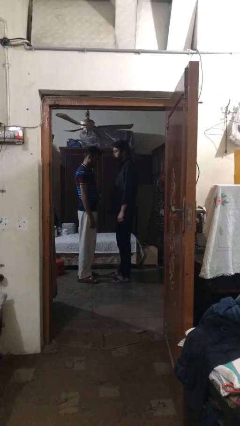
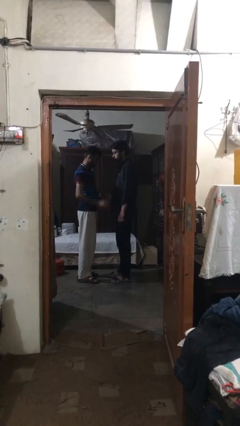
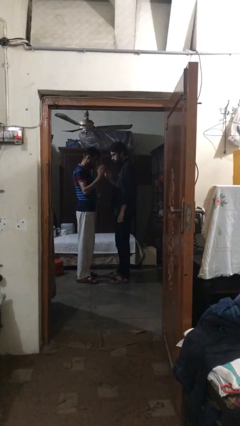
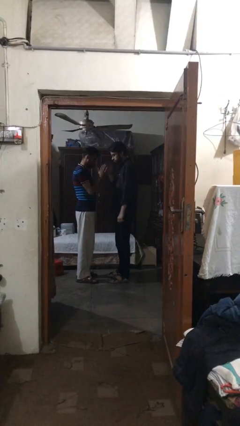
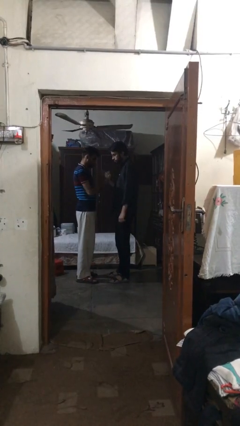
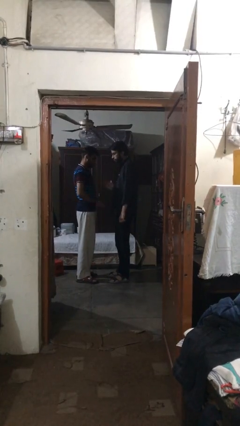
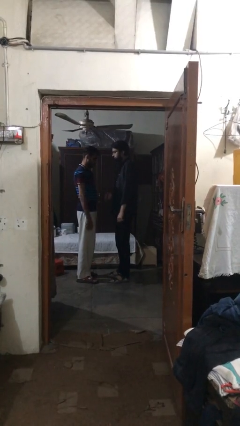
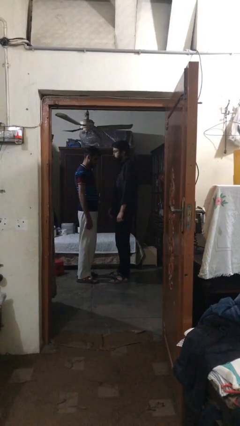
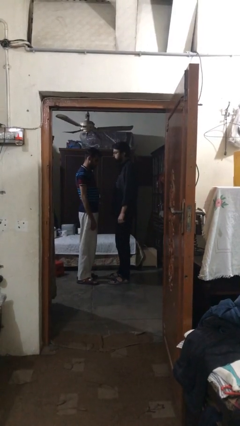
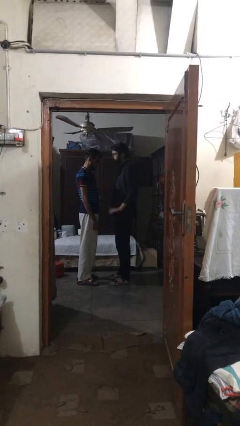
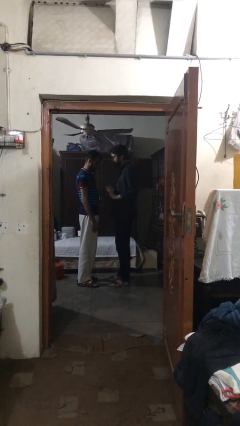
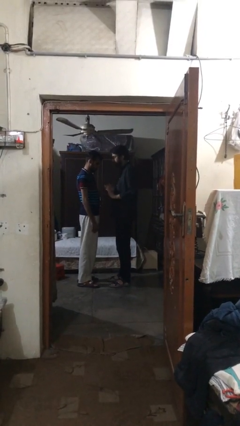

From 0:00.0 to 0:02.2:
person highfives hand

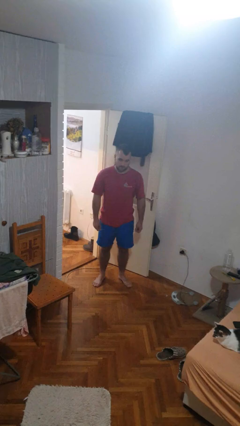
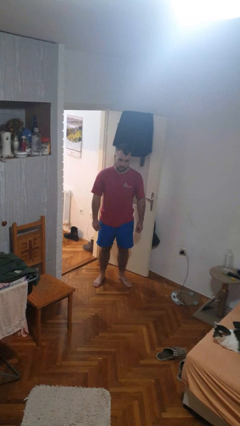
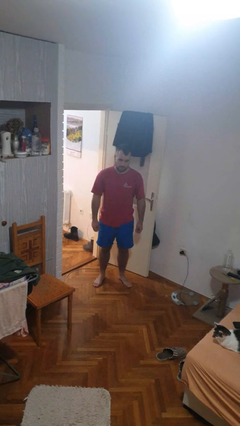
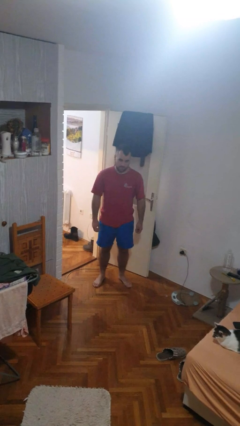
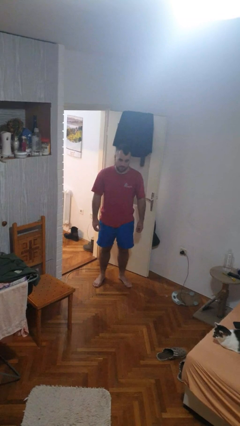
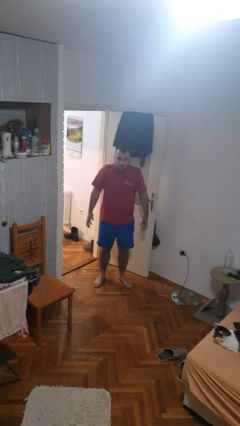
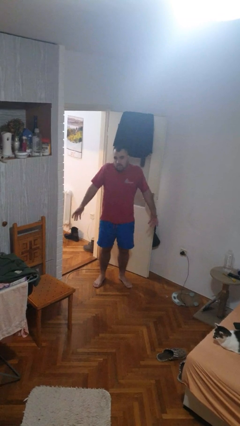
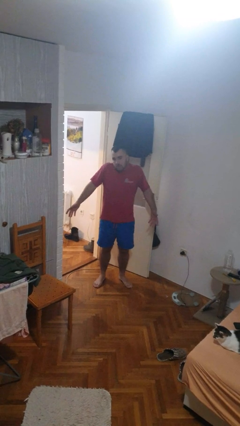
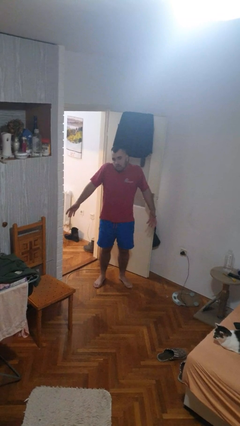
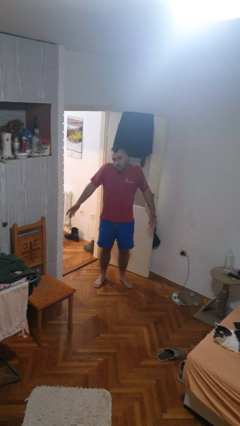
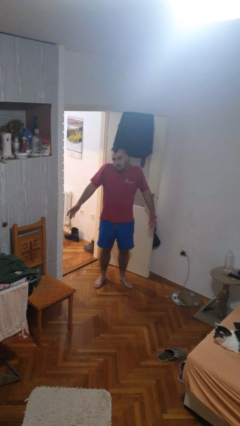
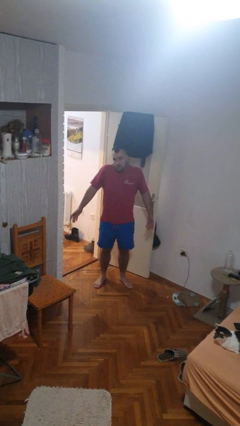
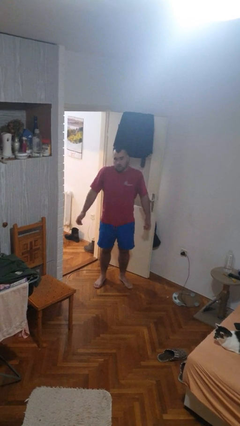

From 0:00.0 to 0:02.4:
person shrugs

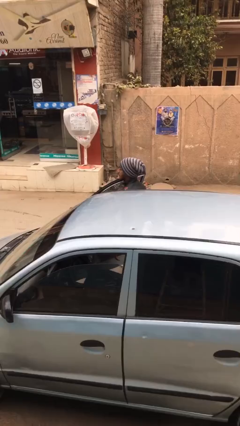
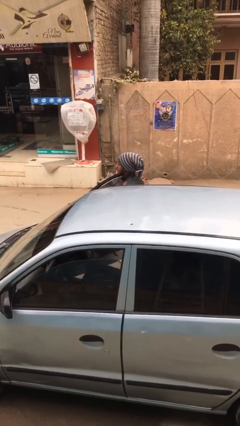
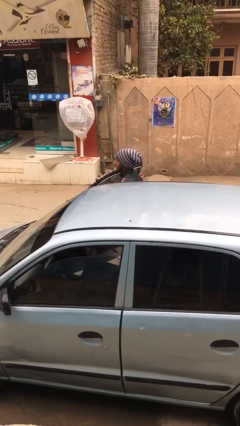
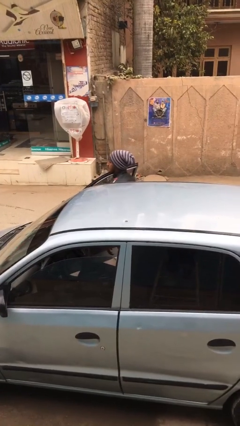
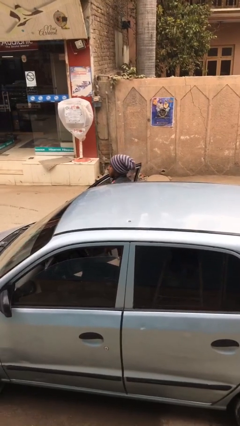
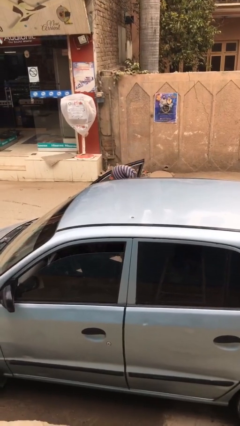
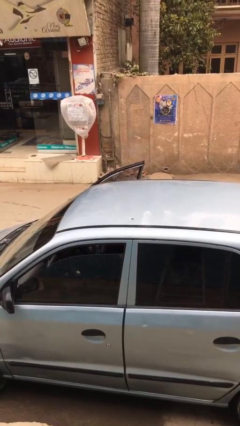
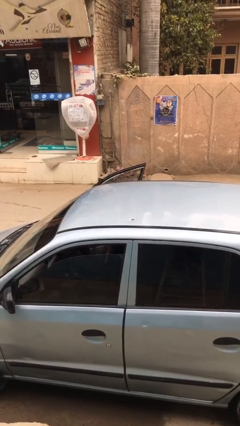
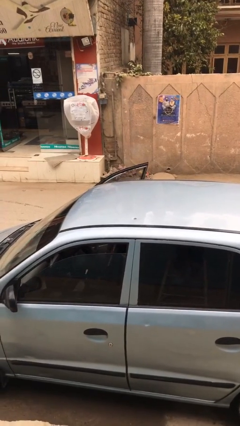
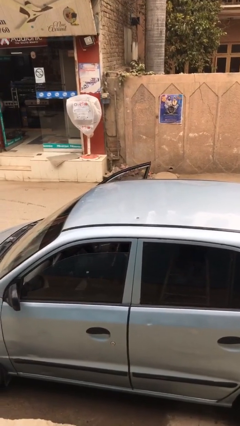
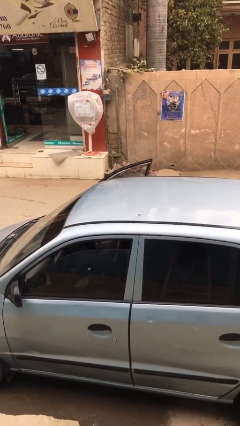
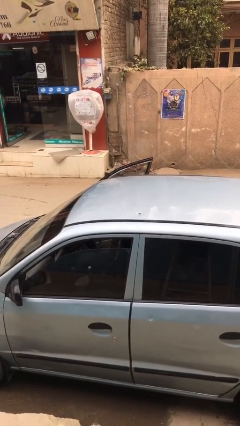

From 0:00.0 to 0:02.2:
person enters car

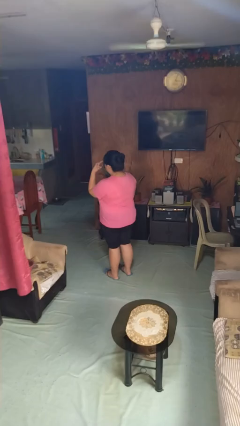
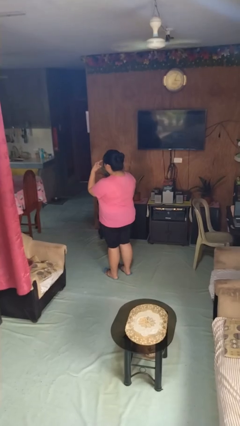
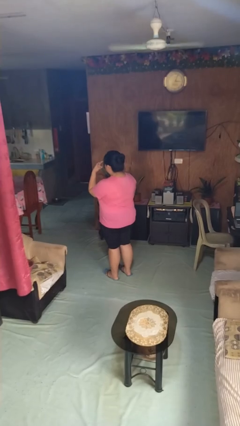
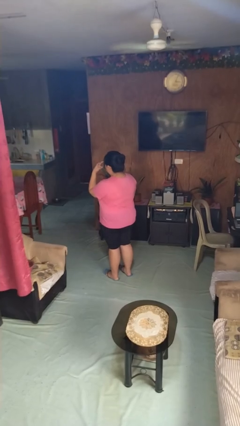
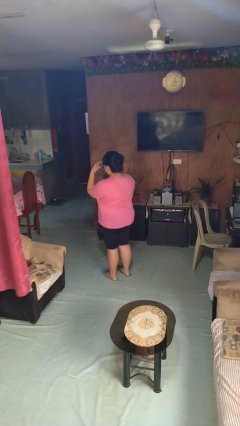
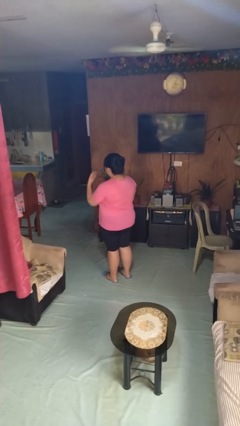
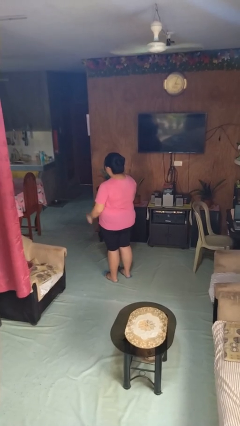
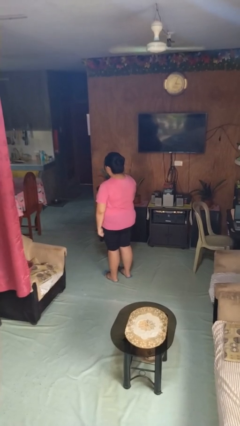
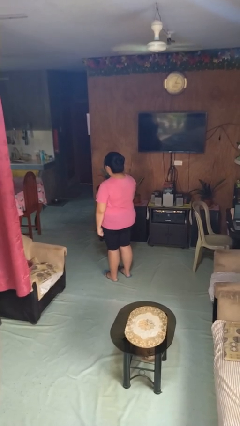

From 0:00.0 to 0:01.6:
person gestures watch closely

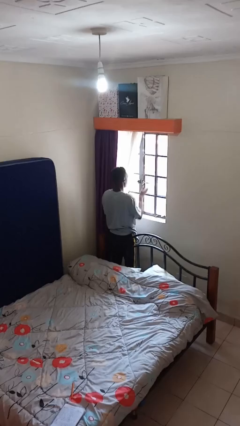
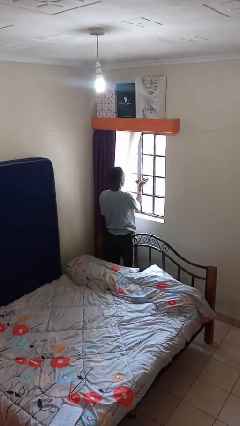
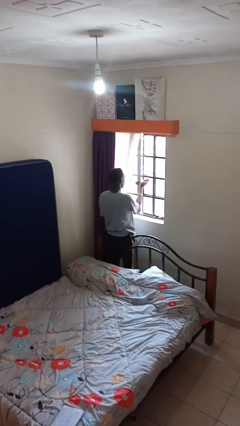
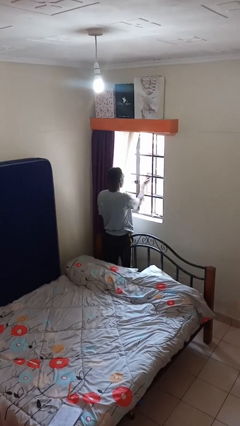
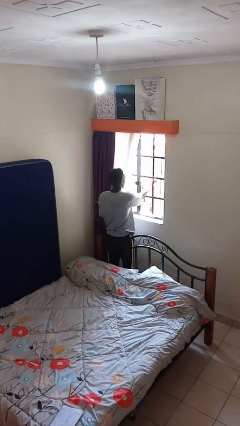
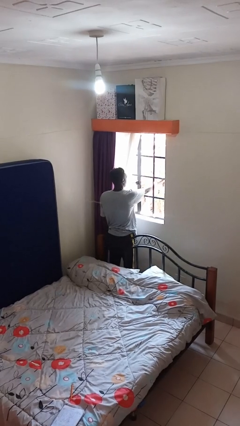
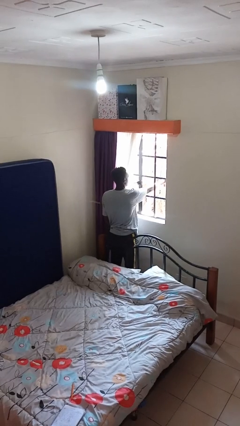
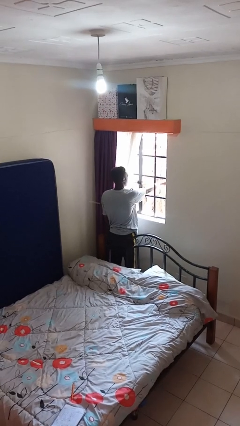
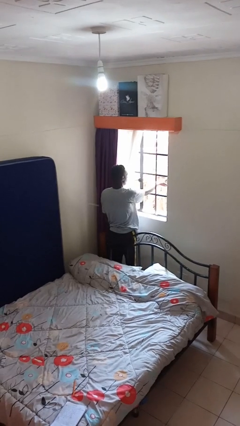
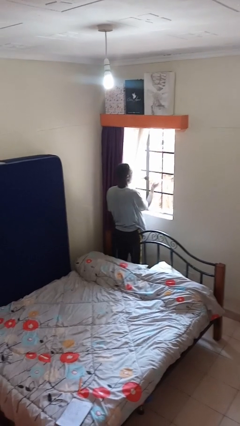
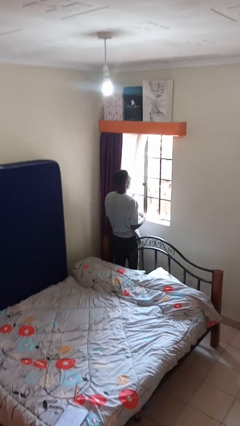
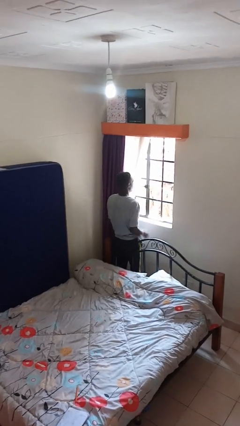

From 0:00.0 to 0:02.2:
person opens home window

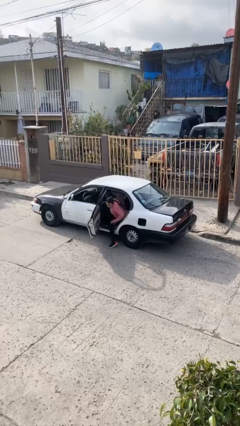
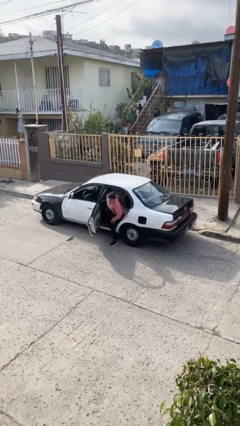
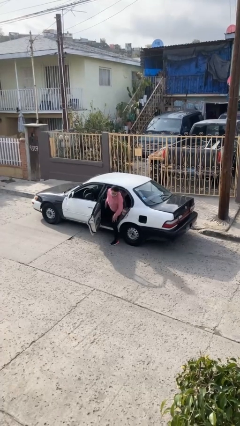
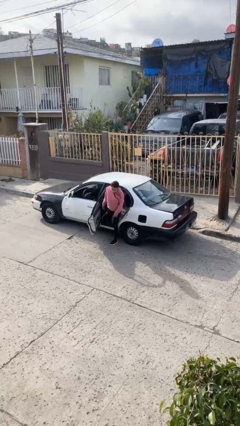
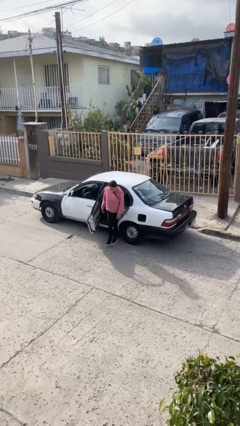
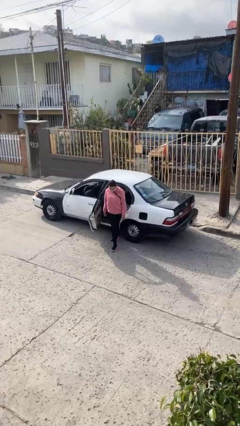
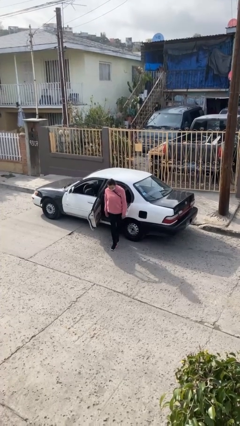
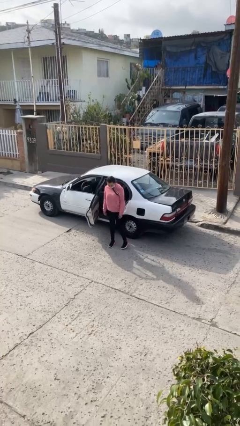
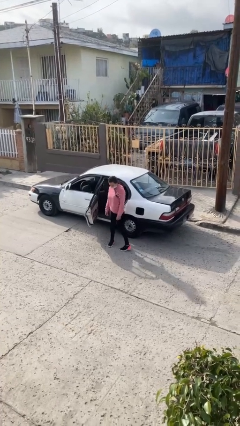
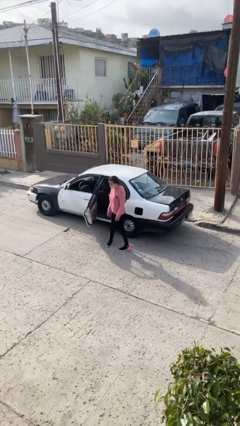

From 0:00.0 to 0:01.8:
person exits car

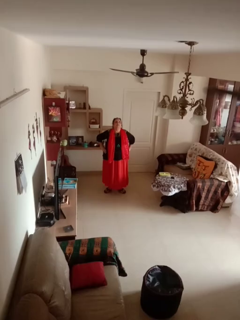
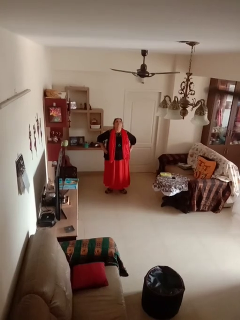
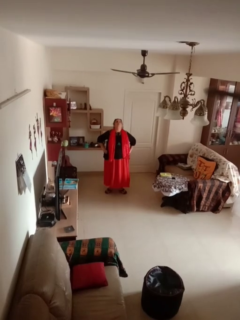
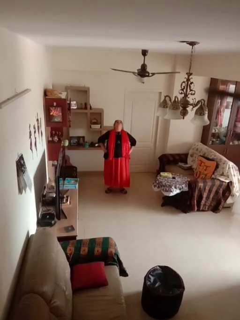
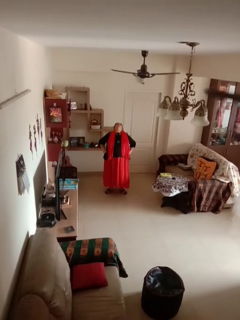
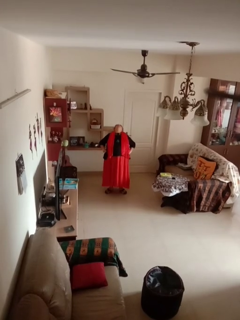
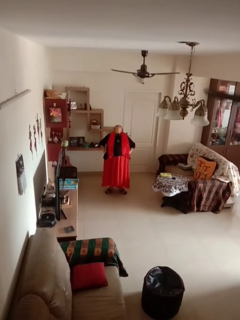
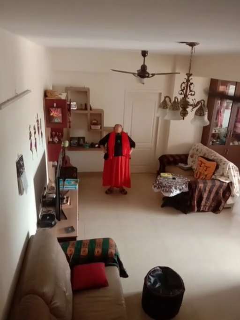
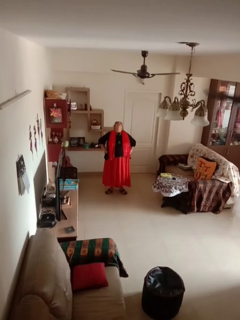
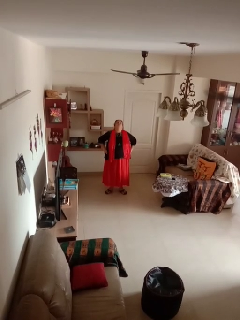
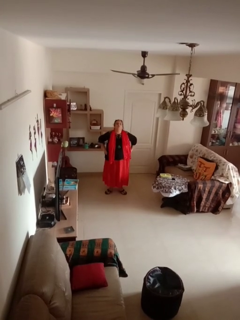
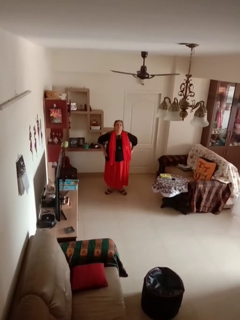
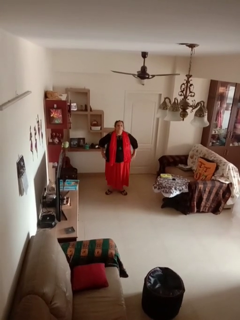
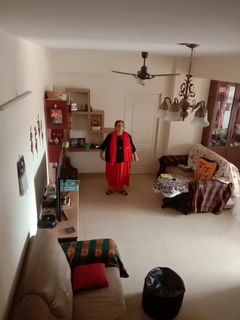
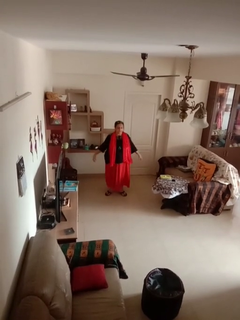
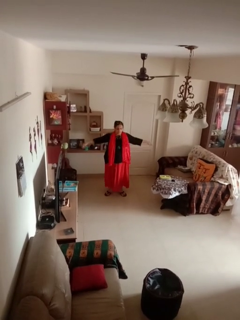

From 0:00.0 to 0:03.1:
person stretches back

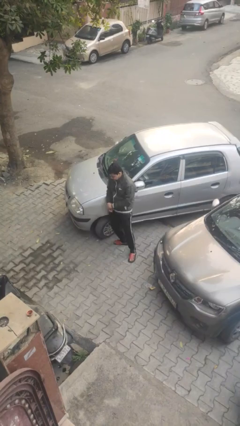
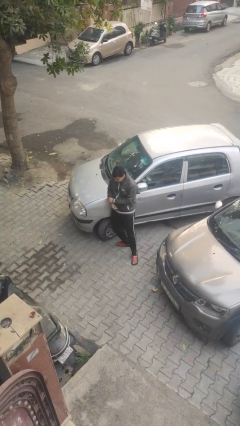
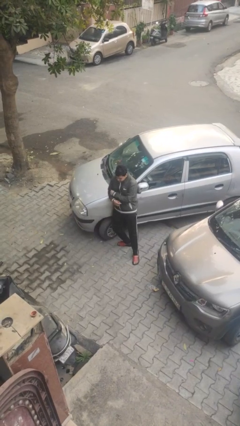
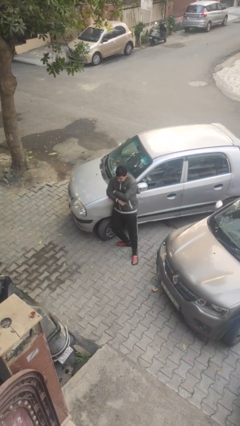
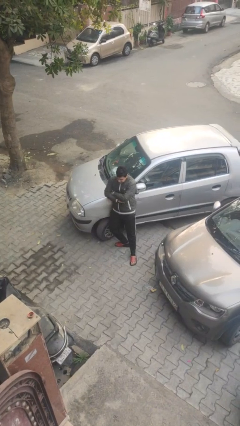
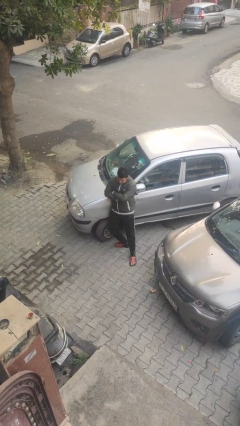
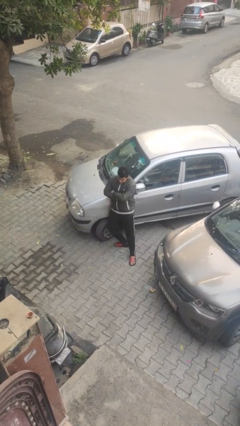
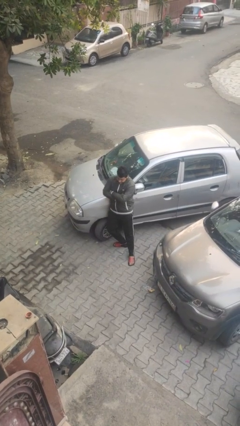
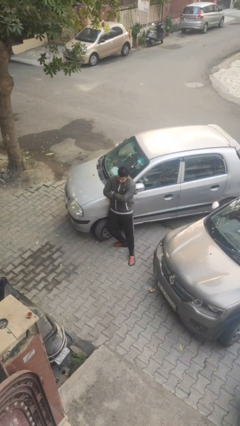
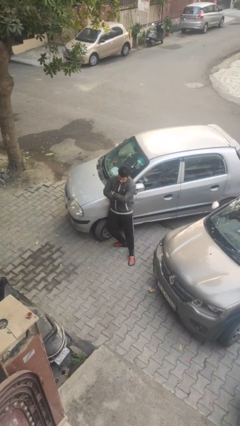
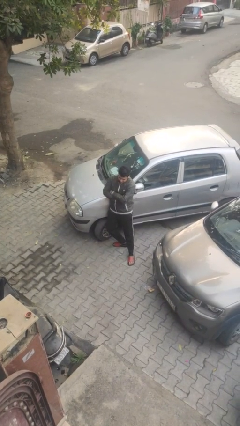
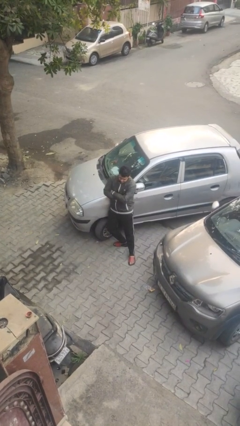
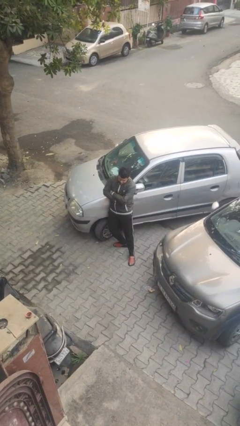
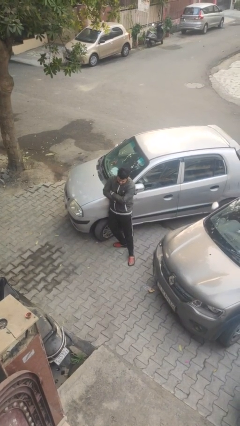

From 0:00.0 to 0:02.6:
person leans against car
